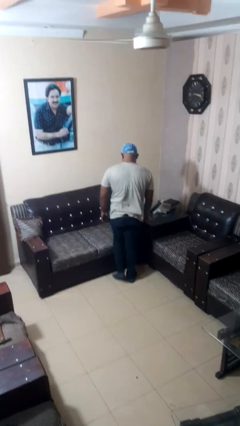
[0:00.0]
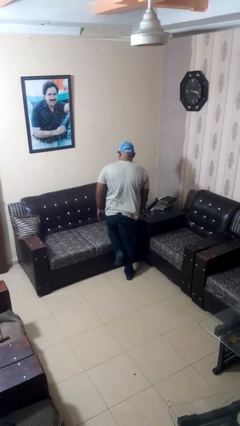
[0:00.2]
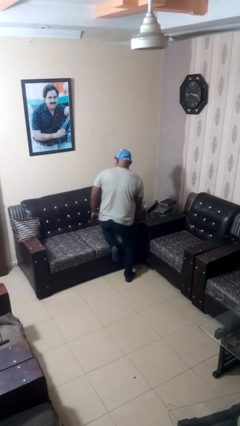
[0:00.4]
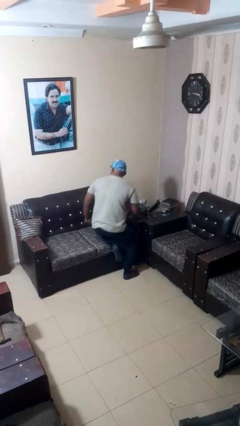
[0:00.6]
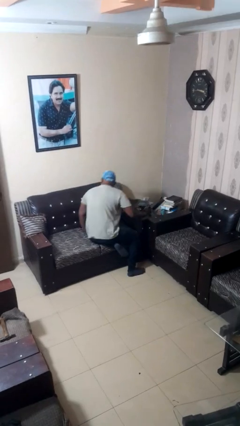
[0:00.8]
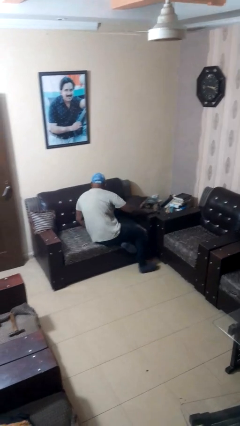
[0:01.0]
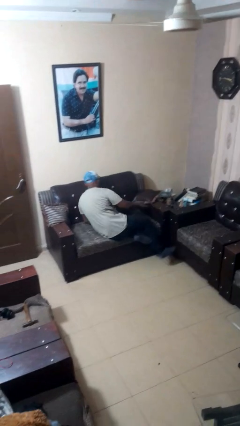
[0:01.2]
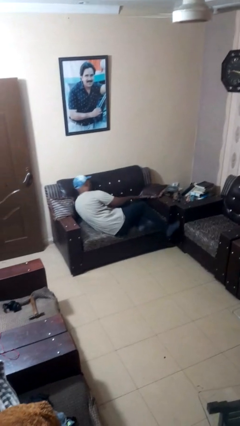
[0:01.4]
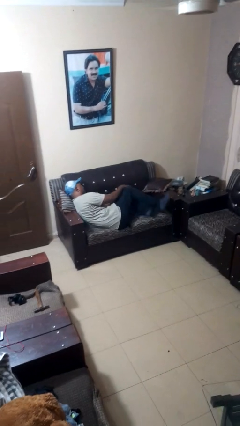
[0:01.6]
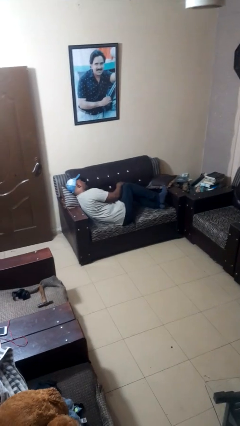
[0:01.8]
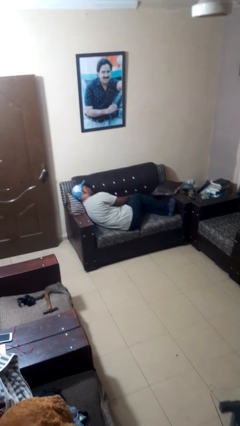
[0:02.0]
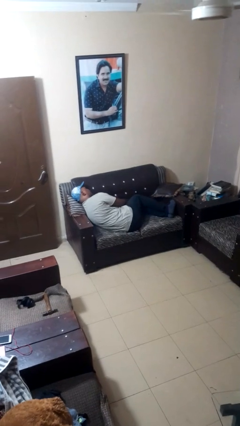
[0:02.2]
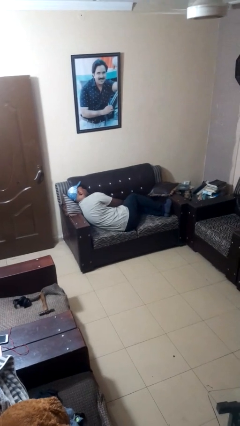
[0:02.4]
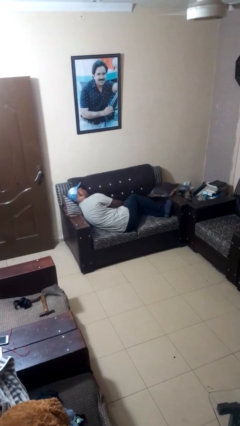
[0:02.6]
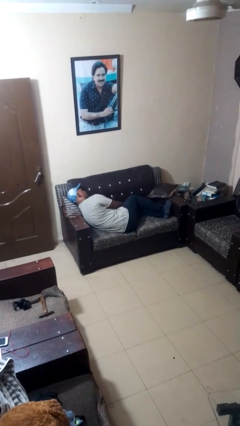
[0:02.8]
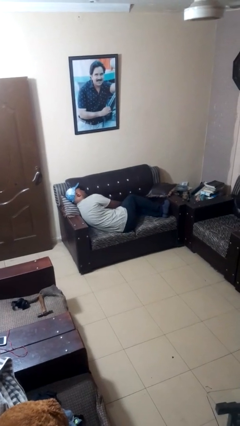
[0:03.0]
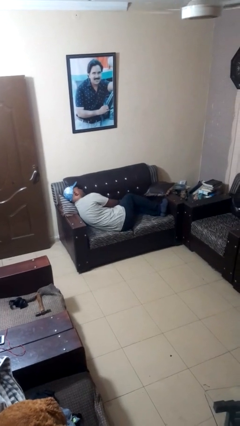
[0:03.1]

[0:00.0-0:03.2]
person lies down on couch

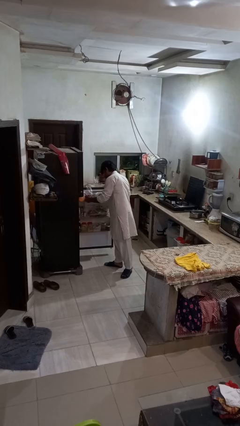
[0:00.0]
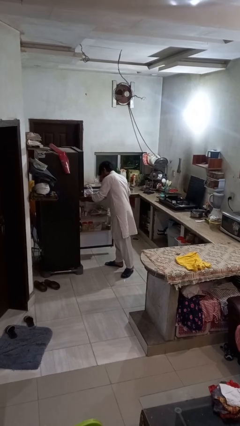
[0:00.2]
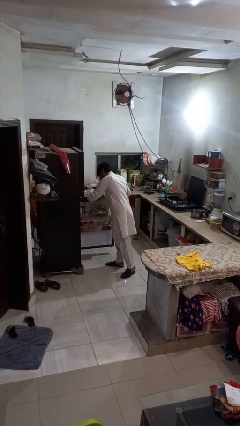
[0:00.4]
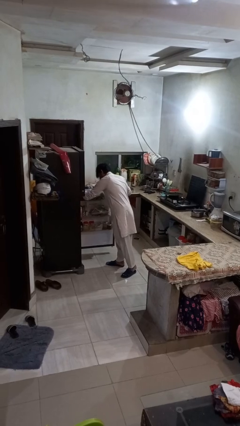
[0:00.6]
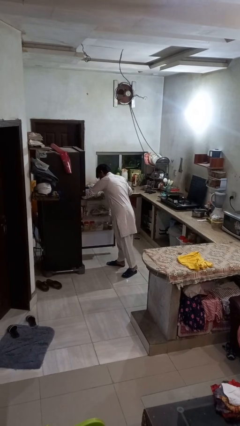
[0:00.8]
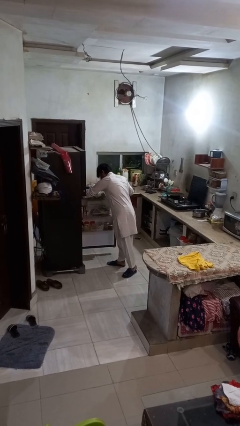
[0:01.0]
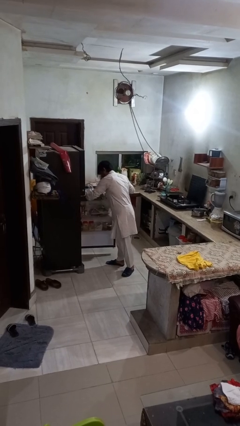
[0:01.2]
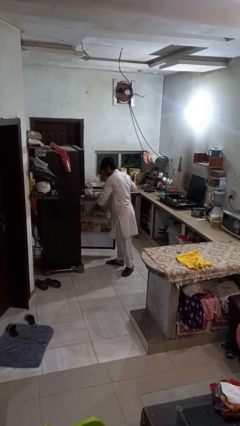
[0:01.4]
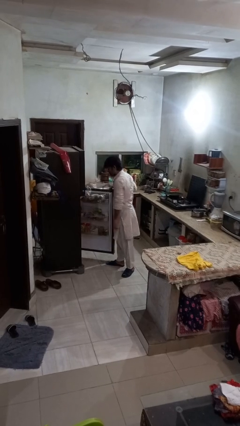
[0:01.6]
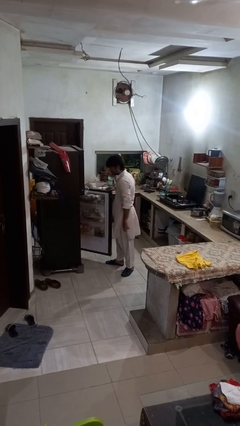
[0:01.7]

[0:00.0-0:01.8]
person puts object into refrigerator

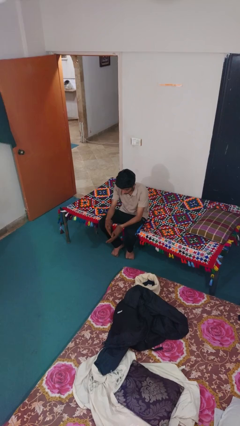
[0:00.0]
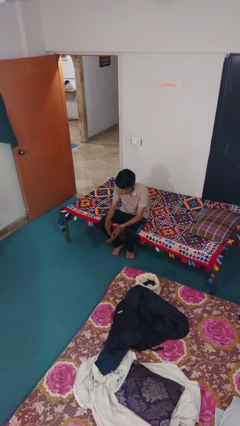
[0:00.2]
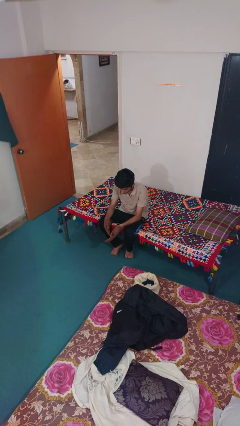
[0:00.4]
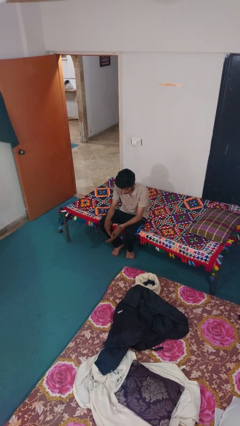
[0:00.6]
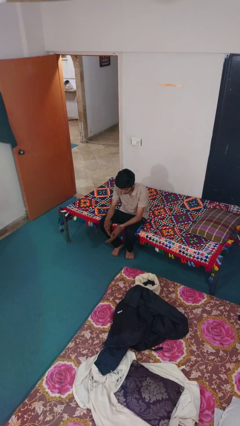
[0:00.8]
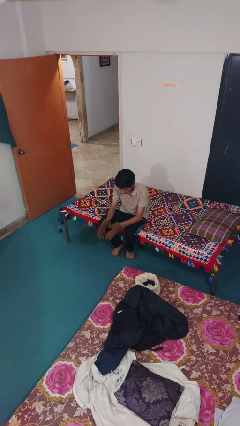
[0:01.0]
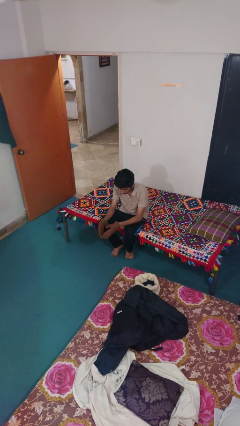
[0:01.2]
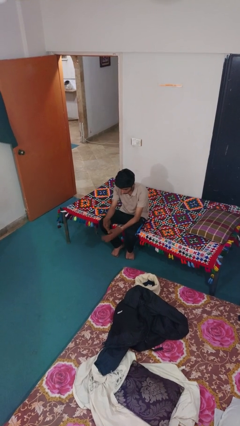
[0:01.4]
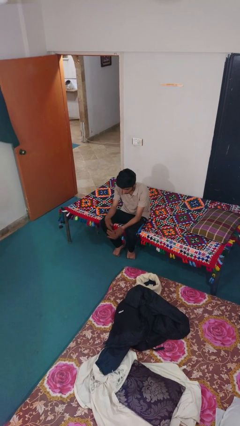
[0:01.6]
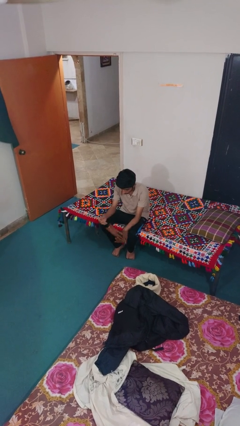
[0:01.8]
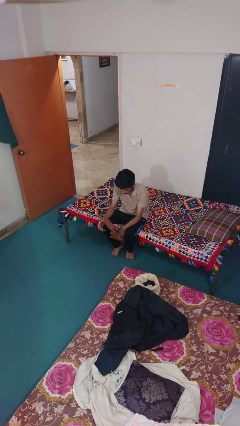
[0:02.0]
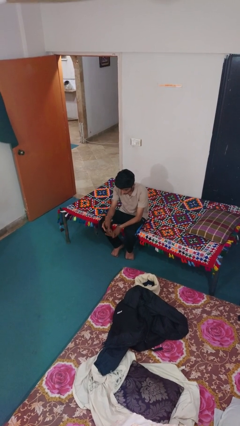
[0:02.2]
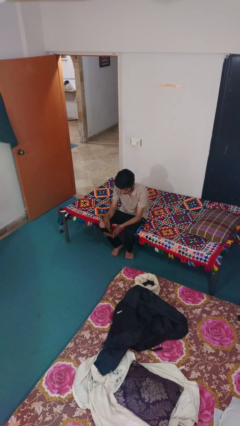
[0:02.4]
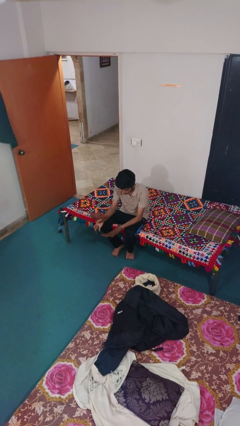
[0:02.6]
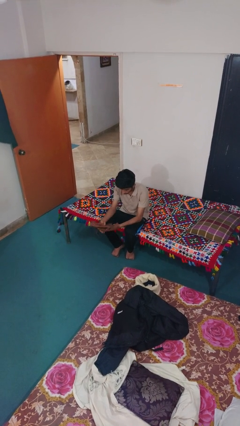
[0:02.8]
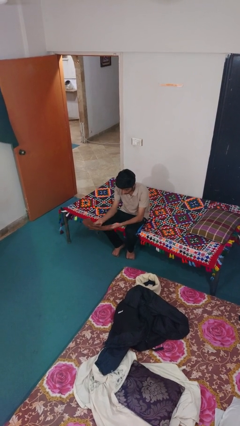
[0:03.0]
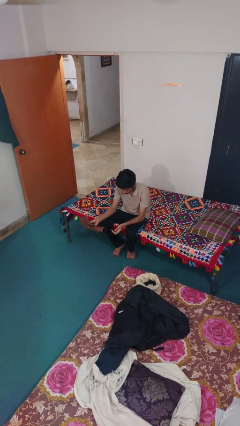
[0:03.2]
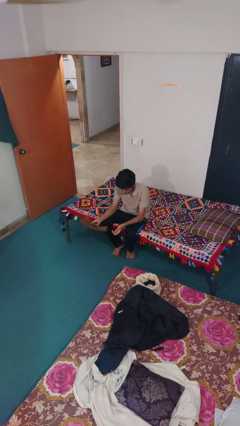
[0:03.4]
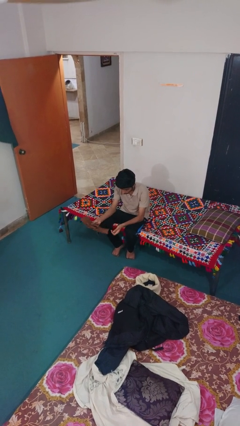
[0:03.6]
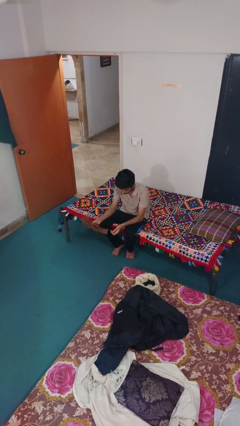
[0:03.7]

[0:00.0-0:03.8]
person takes off gloves

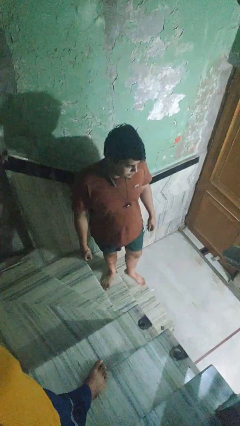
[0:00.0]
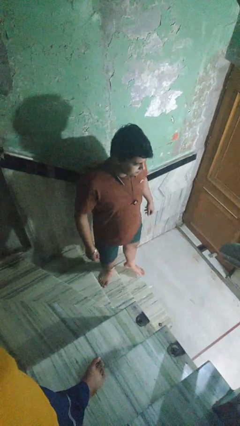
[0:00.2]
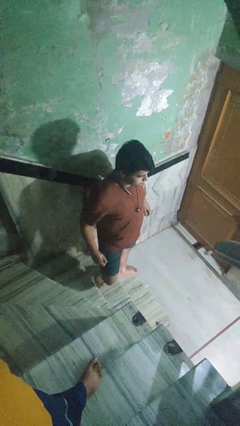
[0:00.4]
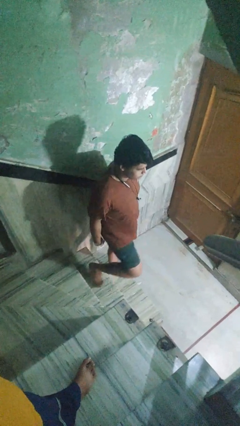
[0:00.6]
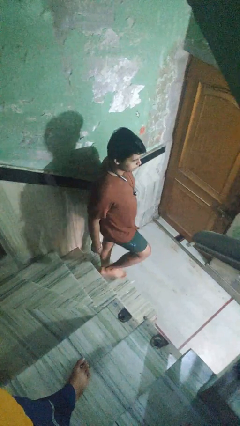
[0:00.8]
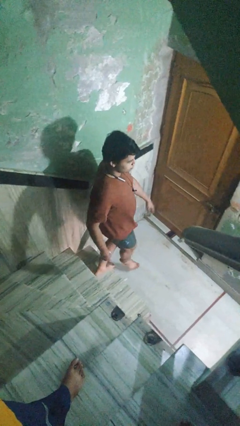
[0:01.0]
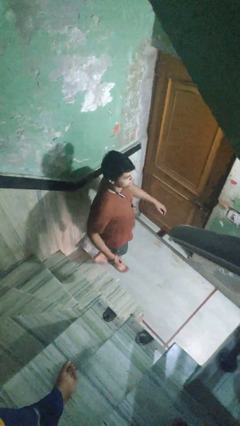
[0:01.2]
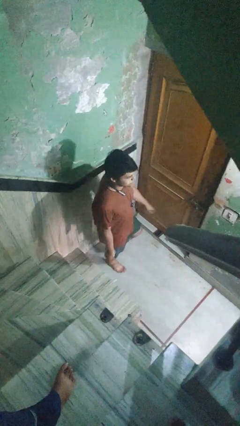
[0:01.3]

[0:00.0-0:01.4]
person climbs down stairs

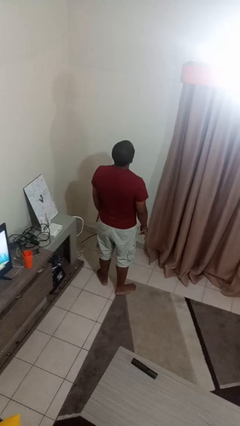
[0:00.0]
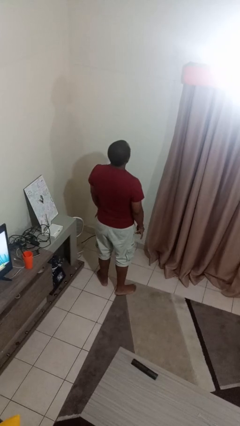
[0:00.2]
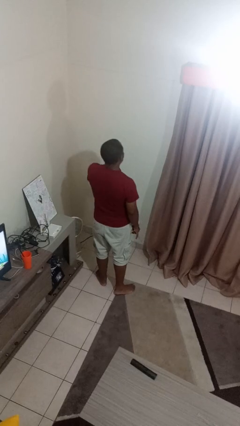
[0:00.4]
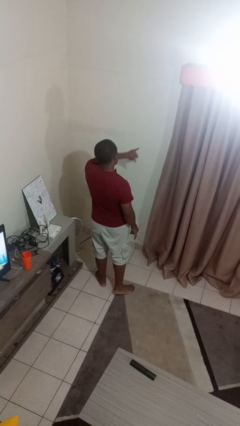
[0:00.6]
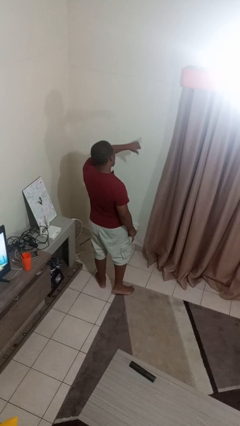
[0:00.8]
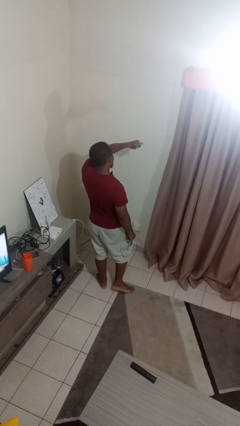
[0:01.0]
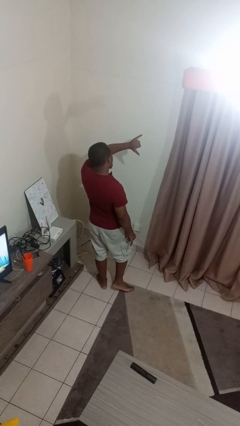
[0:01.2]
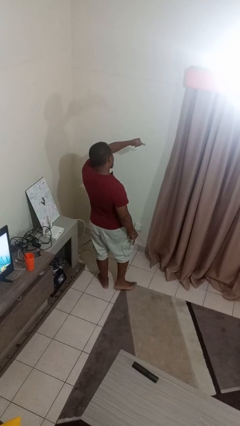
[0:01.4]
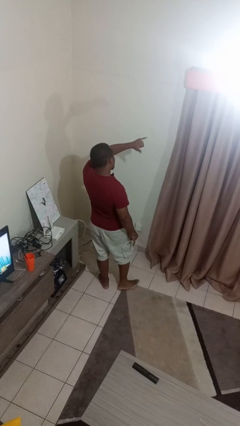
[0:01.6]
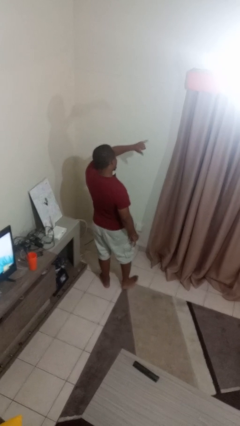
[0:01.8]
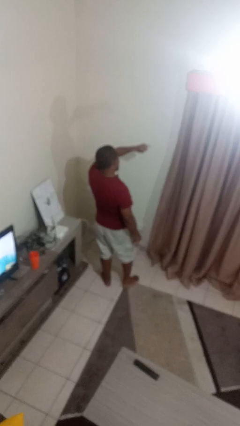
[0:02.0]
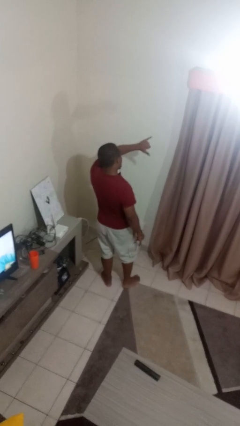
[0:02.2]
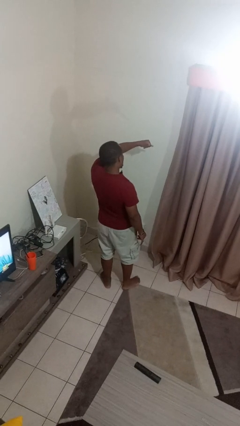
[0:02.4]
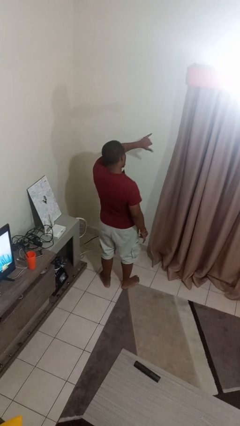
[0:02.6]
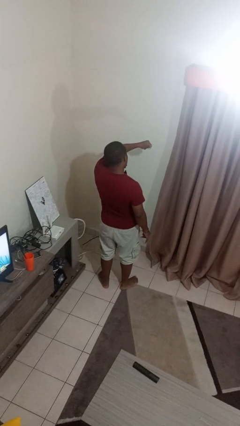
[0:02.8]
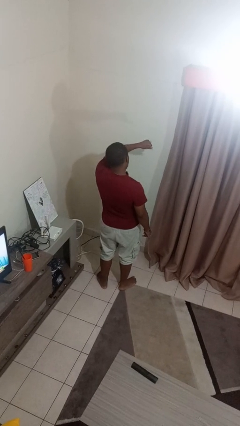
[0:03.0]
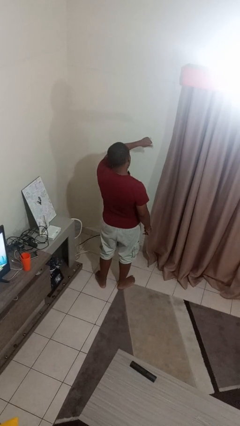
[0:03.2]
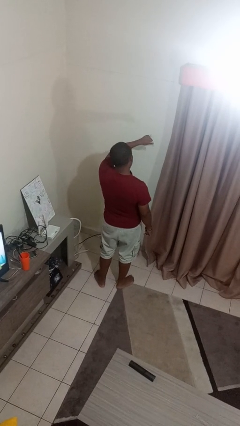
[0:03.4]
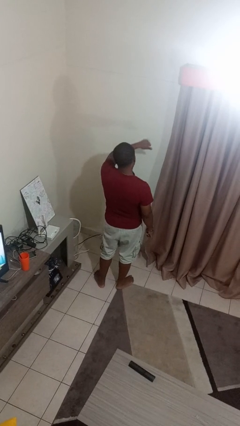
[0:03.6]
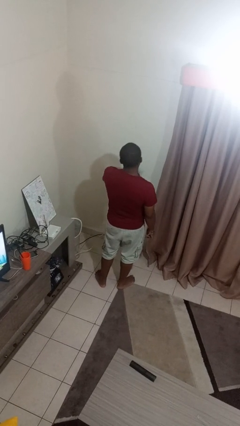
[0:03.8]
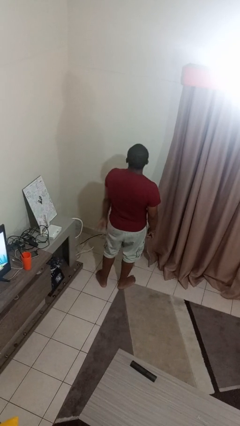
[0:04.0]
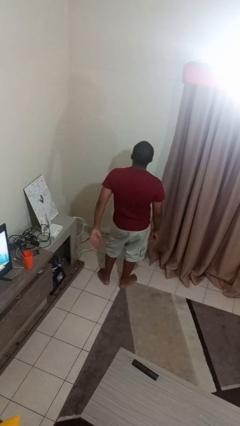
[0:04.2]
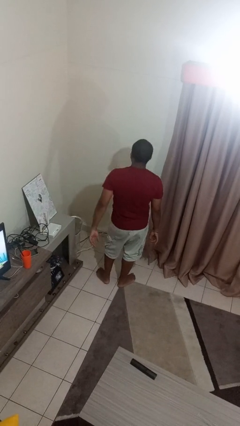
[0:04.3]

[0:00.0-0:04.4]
person gestures hang loose

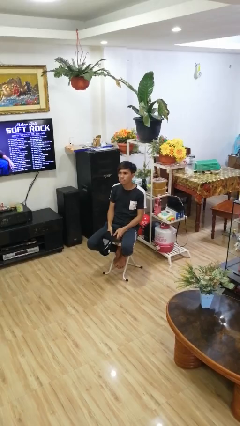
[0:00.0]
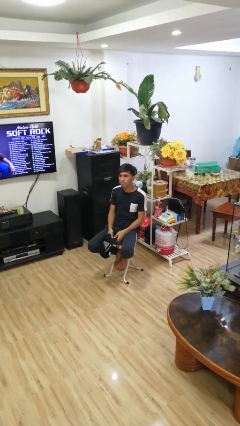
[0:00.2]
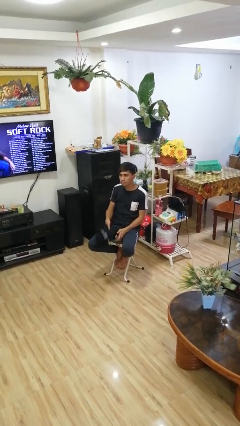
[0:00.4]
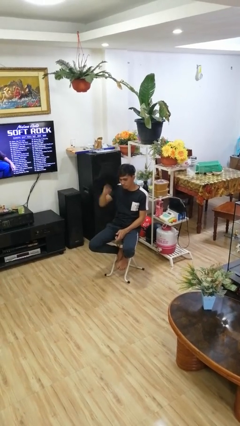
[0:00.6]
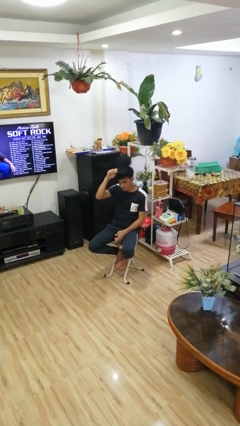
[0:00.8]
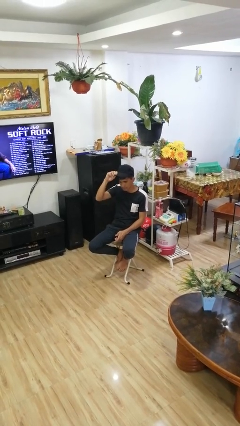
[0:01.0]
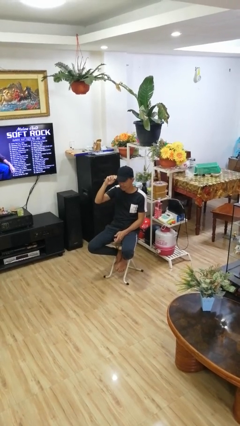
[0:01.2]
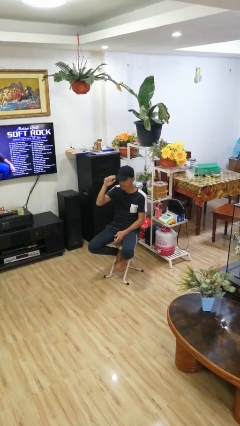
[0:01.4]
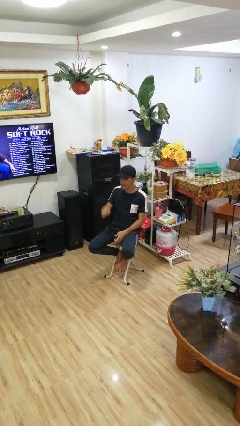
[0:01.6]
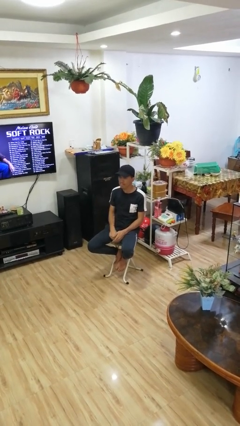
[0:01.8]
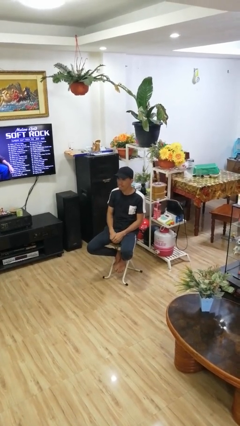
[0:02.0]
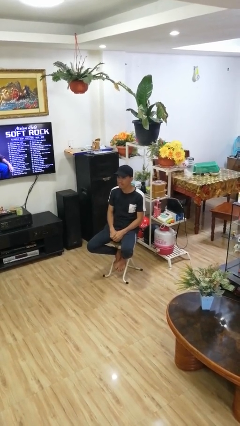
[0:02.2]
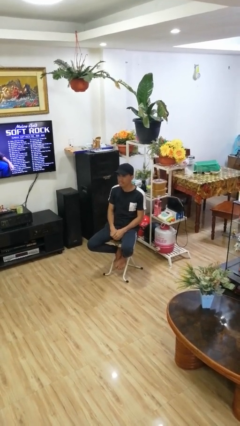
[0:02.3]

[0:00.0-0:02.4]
person puts on hat

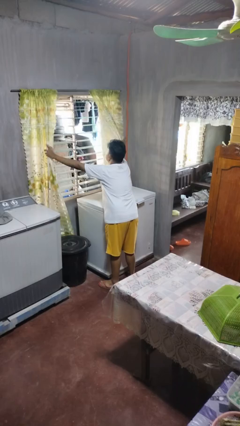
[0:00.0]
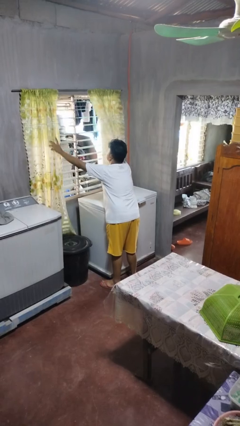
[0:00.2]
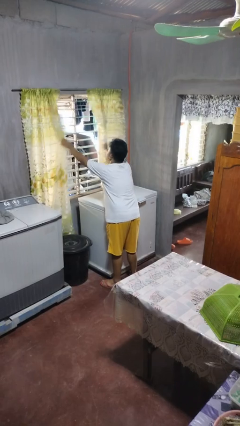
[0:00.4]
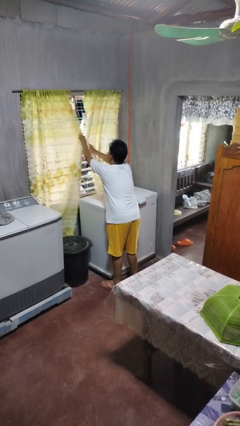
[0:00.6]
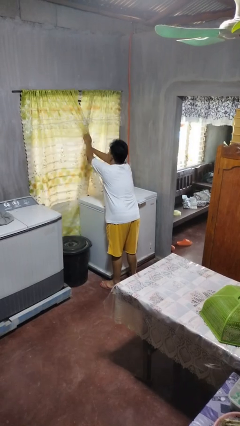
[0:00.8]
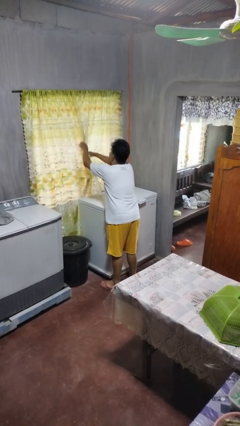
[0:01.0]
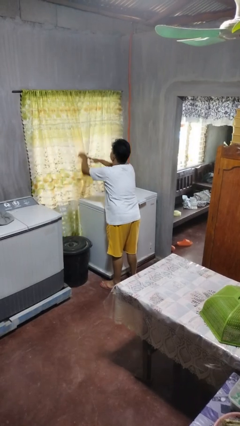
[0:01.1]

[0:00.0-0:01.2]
person closes curtains
